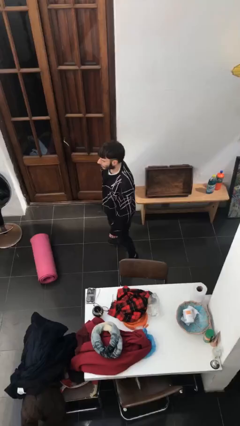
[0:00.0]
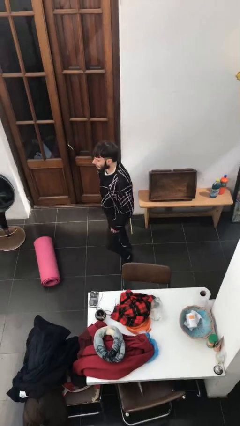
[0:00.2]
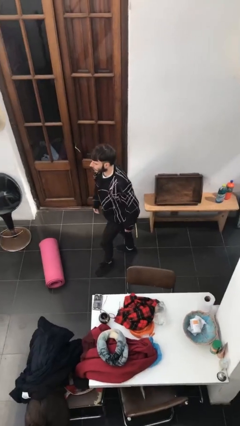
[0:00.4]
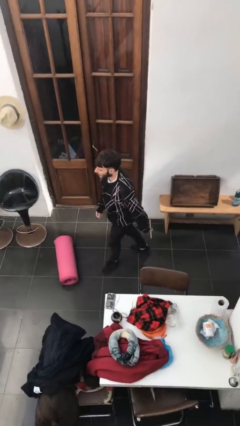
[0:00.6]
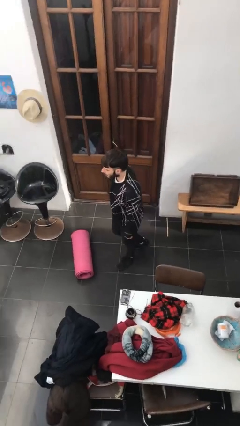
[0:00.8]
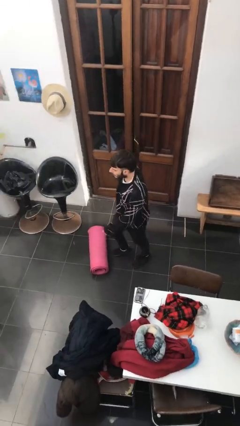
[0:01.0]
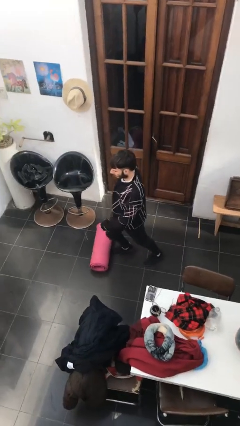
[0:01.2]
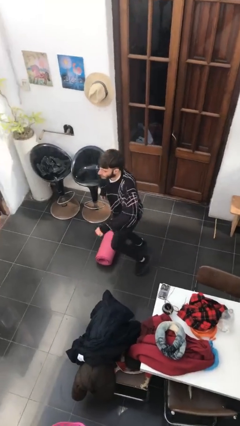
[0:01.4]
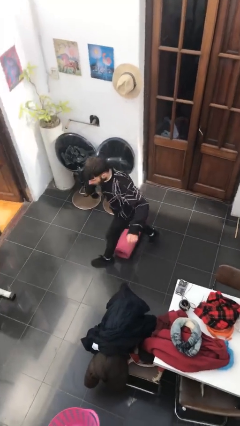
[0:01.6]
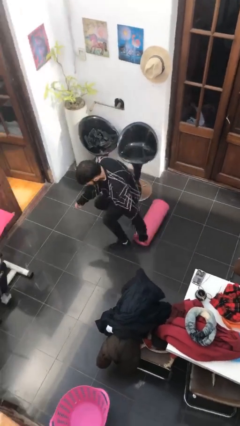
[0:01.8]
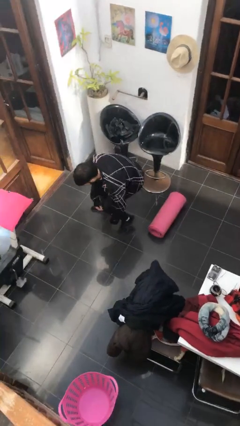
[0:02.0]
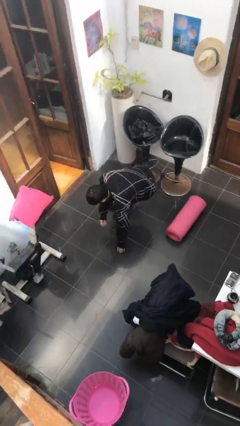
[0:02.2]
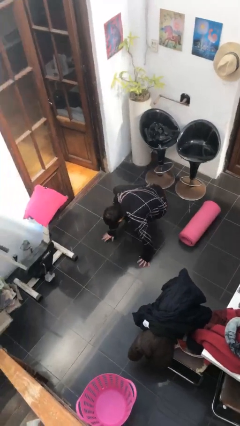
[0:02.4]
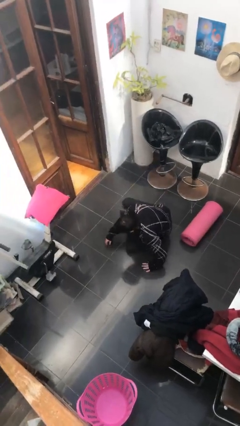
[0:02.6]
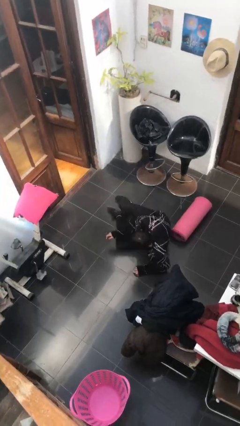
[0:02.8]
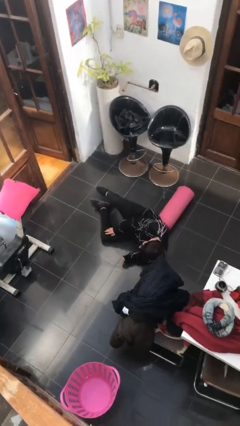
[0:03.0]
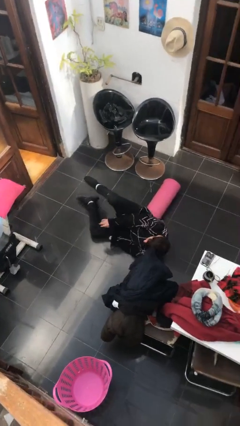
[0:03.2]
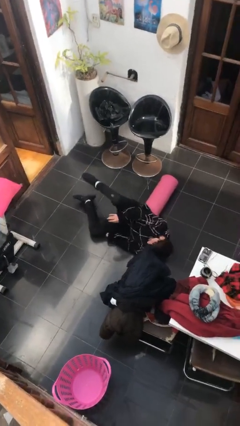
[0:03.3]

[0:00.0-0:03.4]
person trips on object on floor

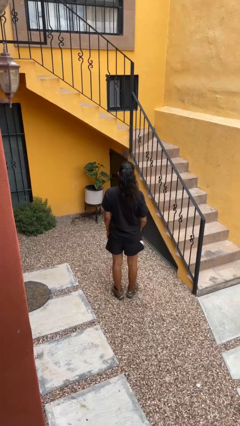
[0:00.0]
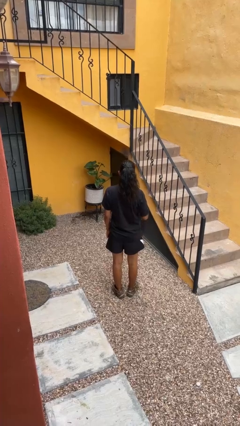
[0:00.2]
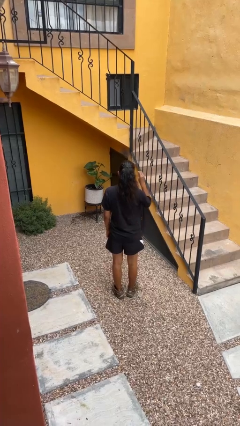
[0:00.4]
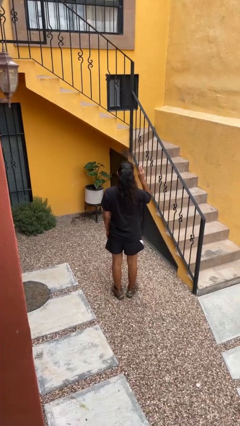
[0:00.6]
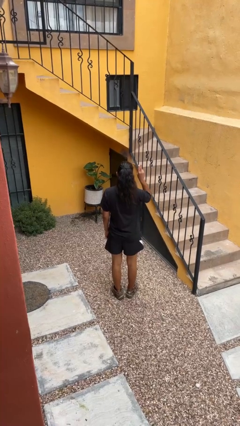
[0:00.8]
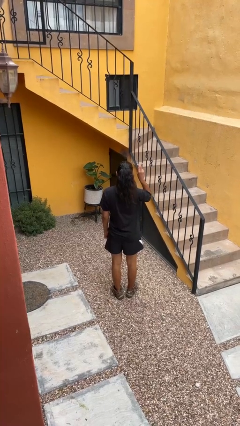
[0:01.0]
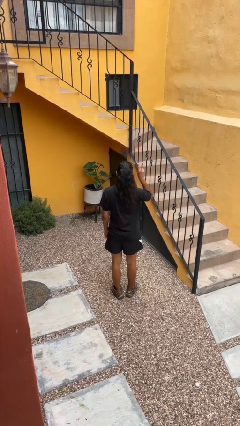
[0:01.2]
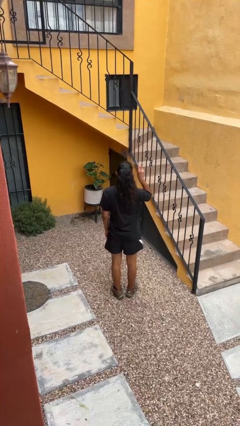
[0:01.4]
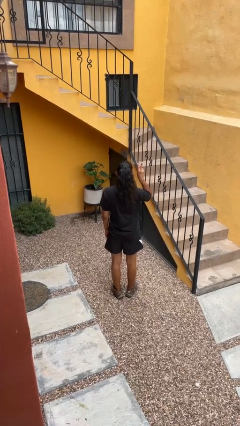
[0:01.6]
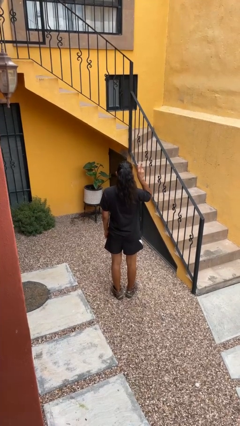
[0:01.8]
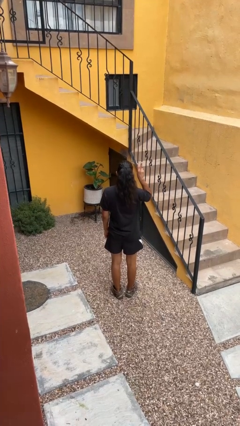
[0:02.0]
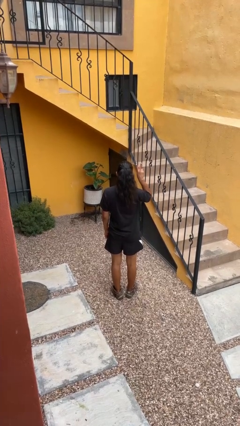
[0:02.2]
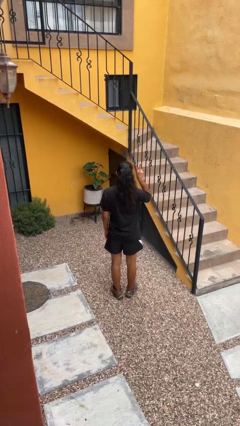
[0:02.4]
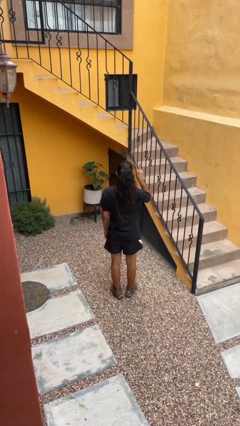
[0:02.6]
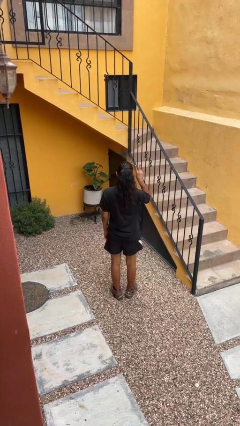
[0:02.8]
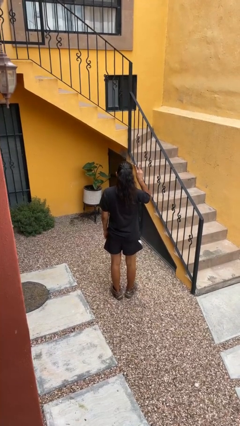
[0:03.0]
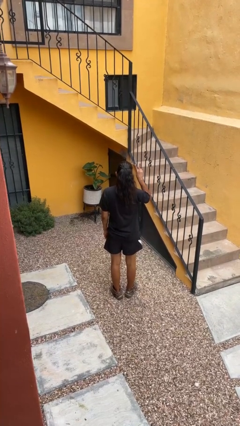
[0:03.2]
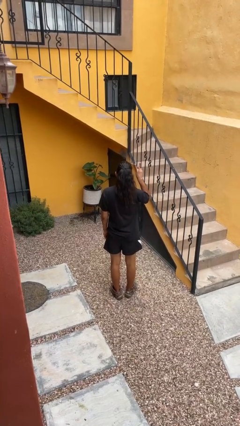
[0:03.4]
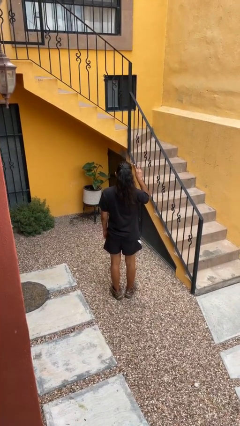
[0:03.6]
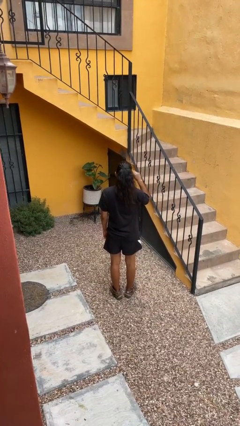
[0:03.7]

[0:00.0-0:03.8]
person gestures peace

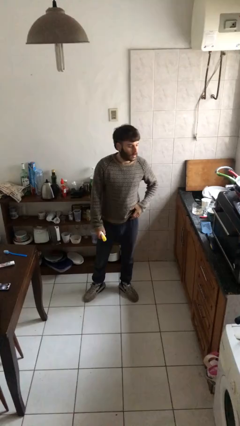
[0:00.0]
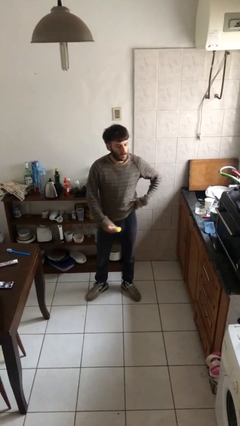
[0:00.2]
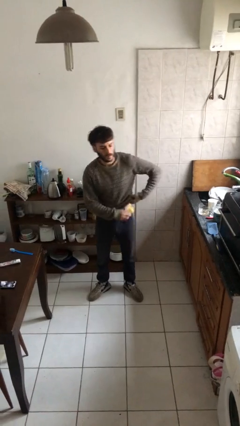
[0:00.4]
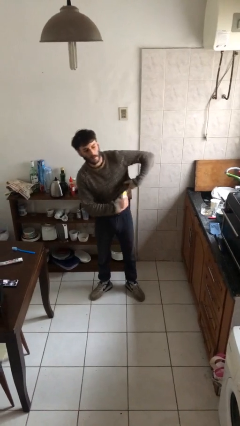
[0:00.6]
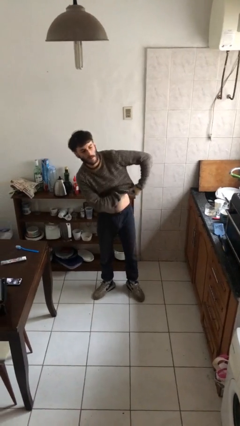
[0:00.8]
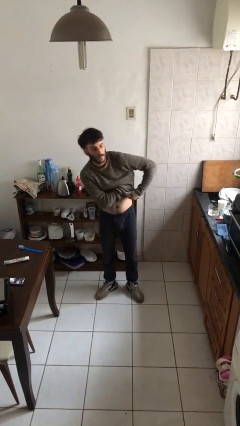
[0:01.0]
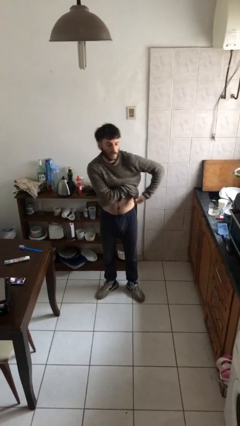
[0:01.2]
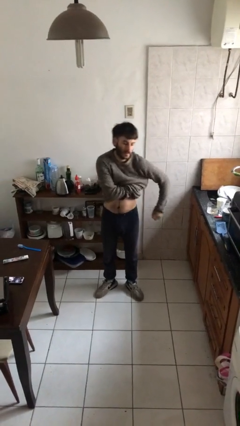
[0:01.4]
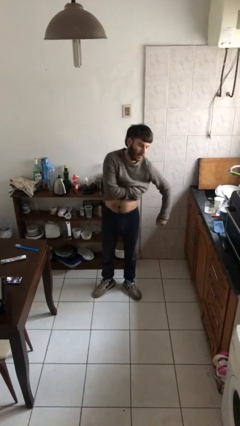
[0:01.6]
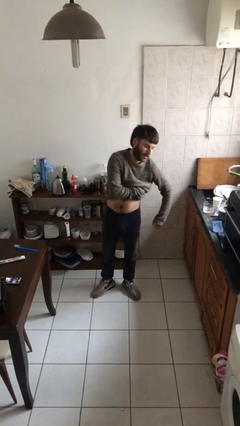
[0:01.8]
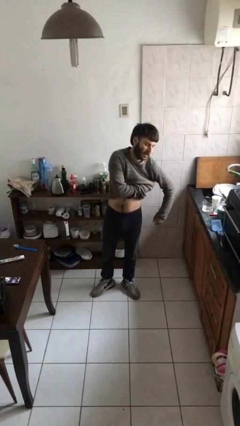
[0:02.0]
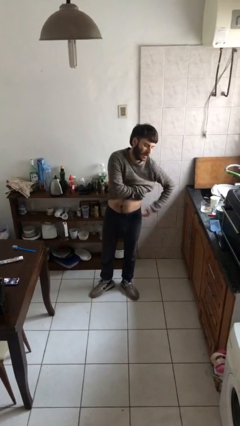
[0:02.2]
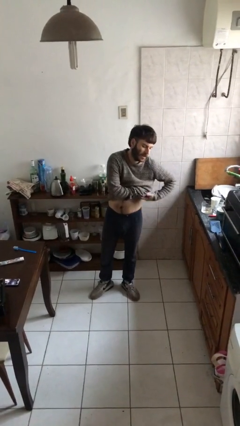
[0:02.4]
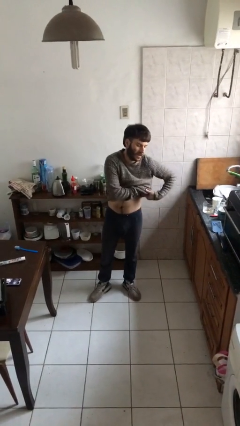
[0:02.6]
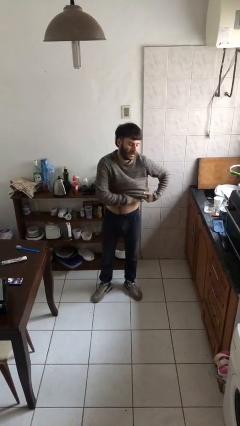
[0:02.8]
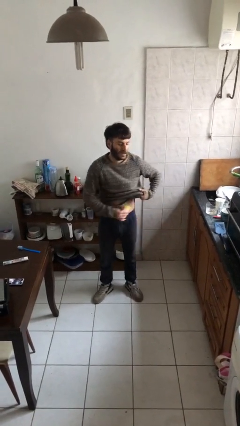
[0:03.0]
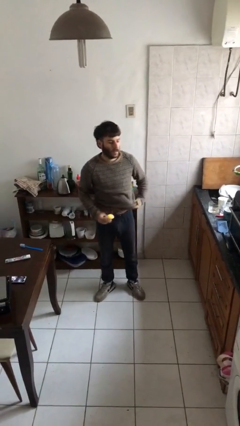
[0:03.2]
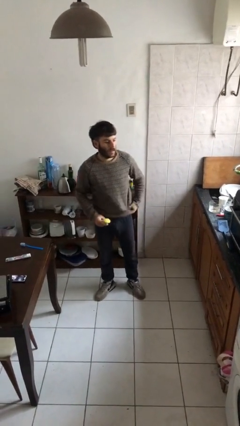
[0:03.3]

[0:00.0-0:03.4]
person applies deodorant

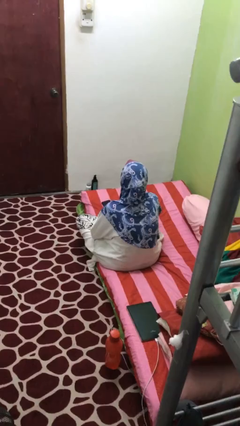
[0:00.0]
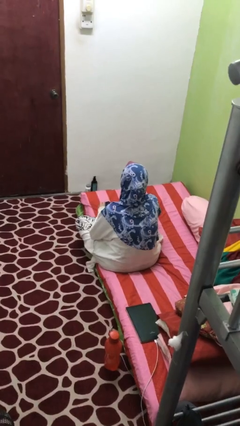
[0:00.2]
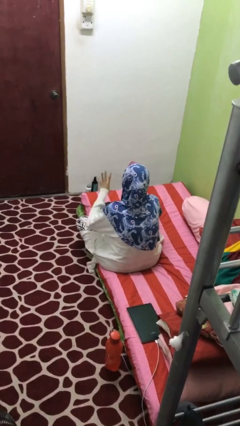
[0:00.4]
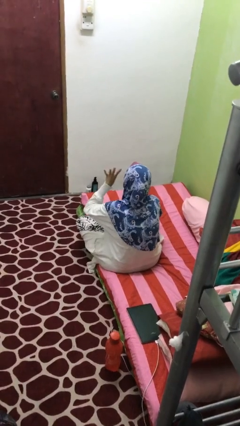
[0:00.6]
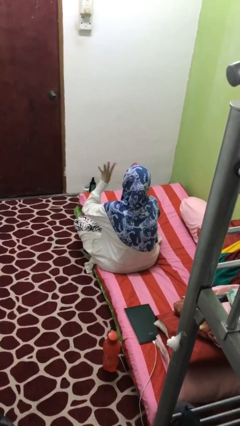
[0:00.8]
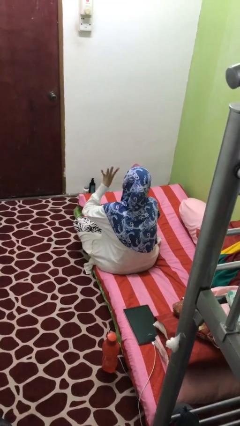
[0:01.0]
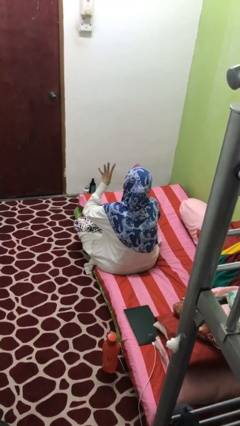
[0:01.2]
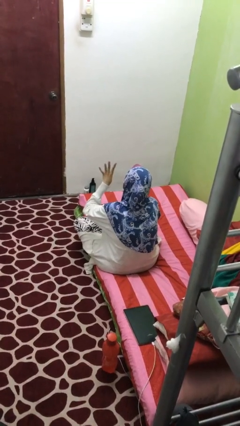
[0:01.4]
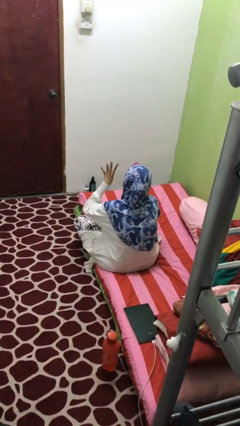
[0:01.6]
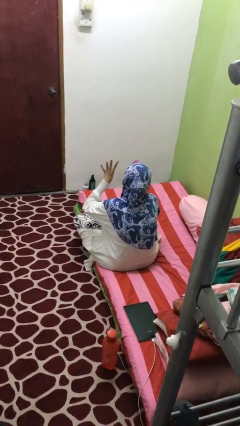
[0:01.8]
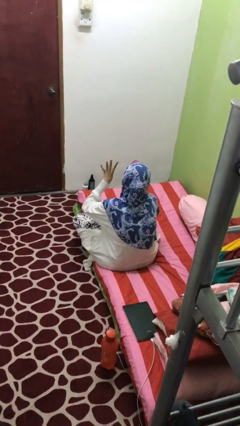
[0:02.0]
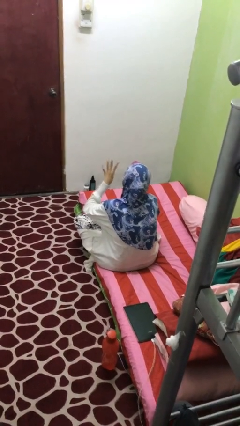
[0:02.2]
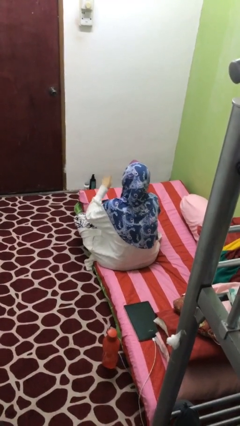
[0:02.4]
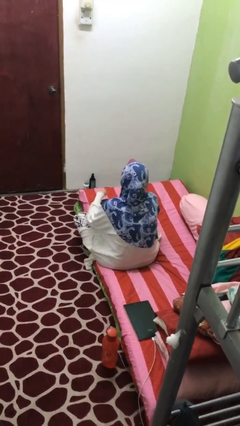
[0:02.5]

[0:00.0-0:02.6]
person gestures number four

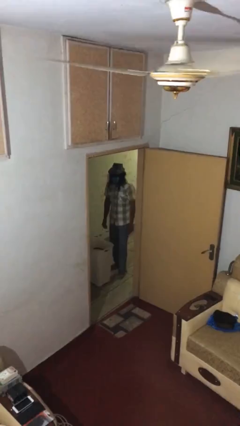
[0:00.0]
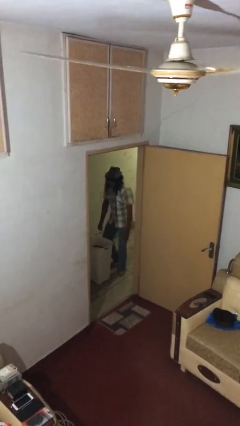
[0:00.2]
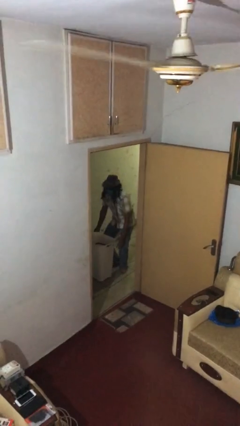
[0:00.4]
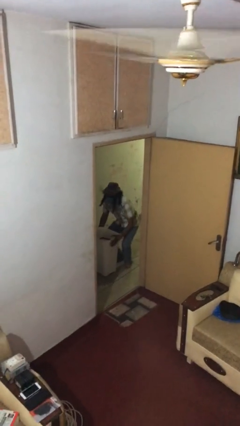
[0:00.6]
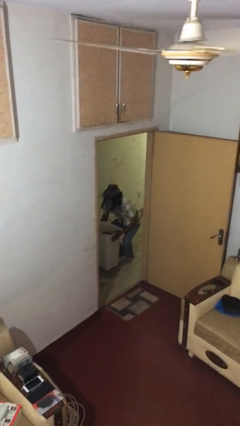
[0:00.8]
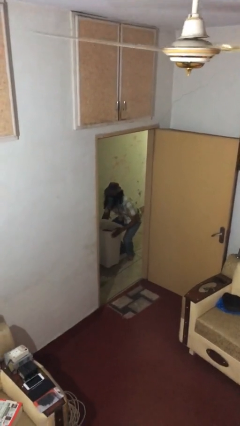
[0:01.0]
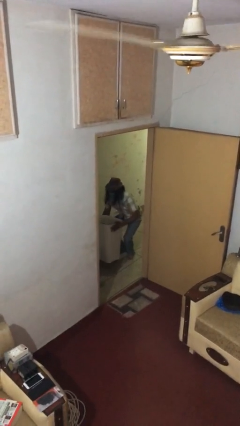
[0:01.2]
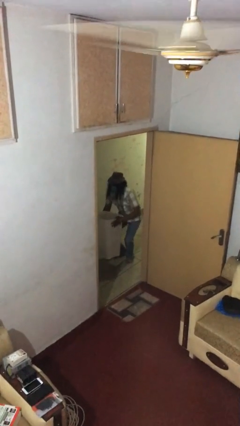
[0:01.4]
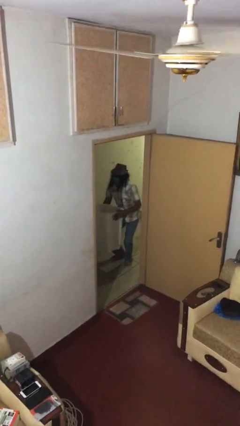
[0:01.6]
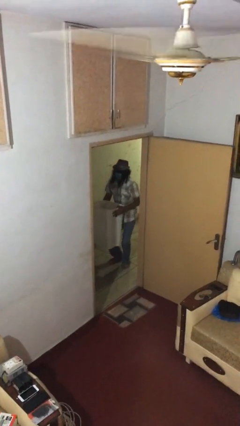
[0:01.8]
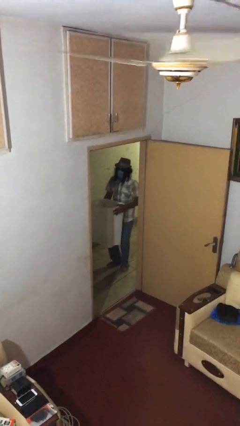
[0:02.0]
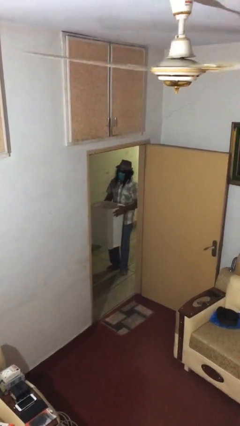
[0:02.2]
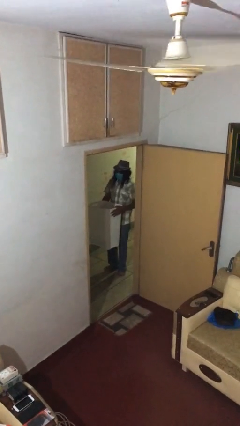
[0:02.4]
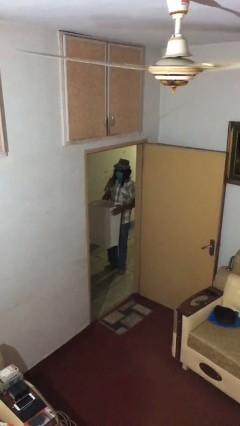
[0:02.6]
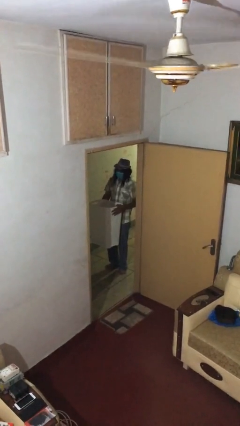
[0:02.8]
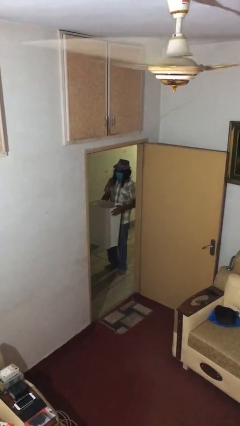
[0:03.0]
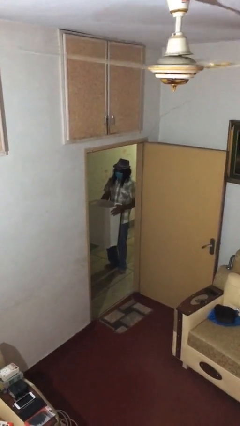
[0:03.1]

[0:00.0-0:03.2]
person picks up object from floor

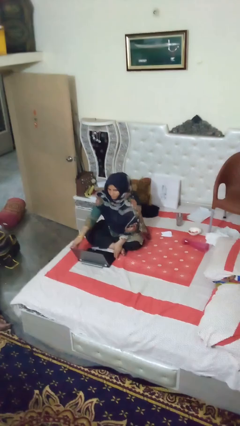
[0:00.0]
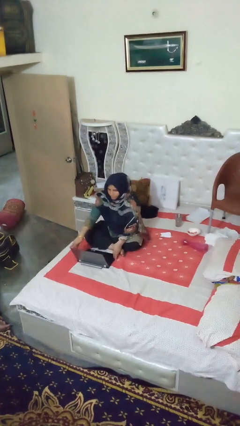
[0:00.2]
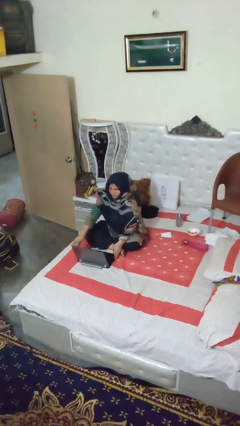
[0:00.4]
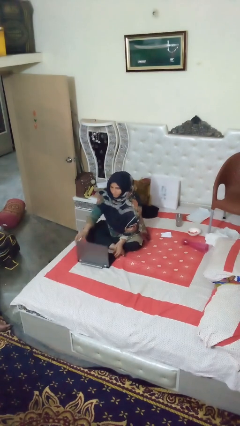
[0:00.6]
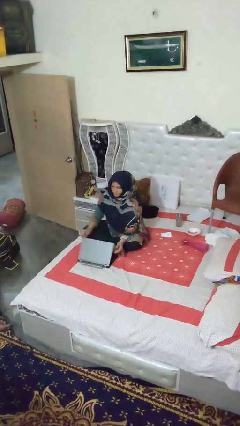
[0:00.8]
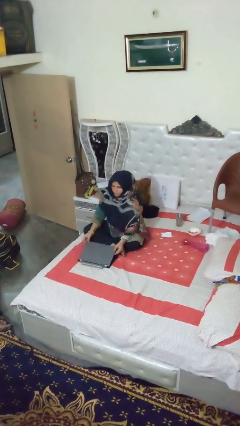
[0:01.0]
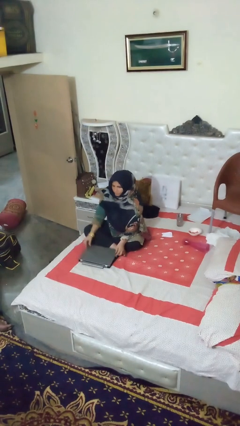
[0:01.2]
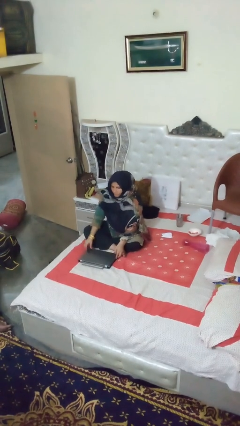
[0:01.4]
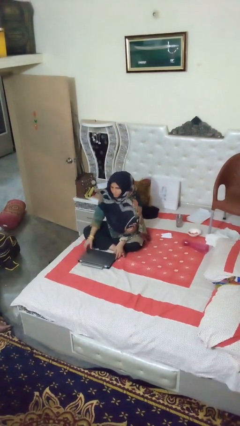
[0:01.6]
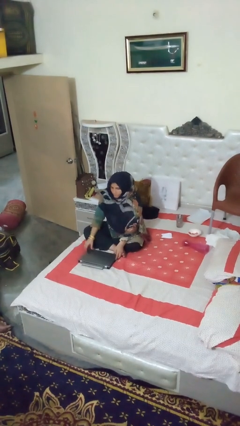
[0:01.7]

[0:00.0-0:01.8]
person closes laptop
